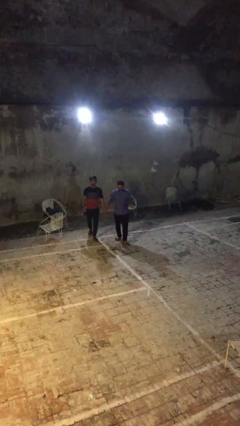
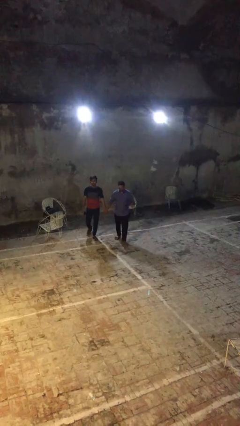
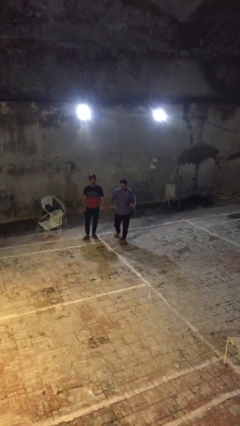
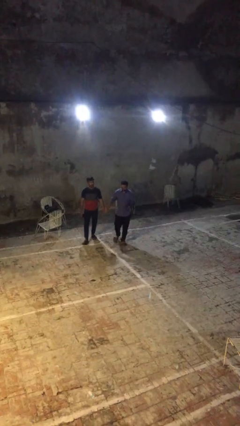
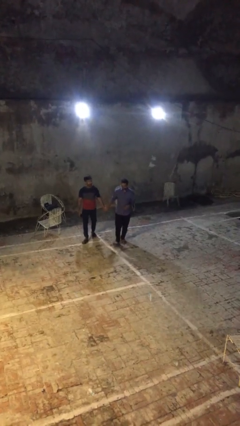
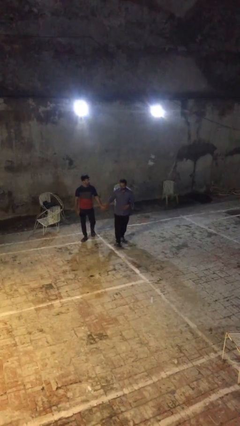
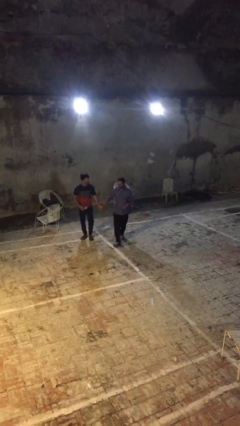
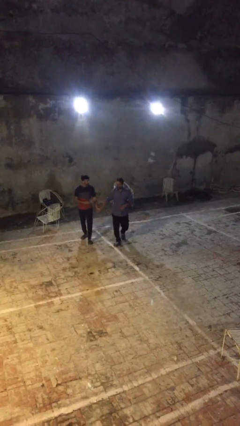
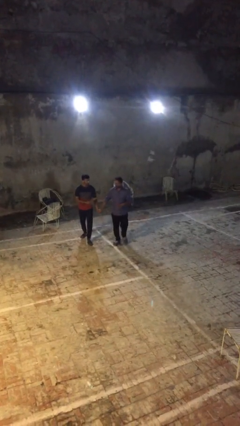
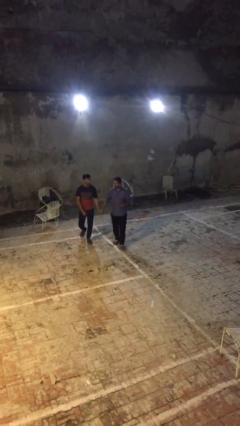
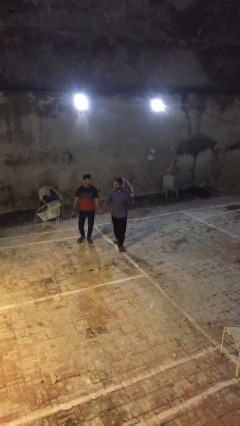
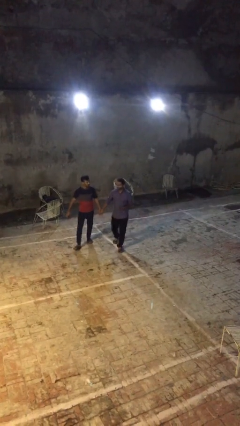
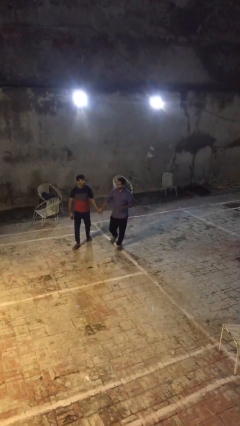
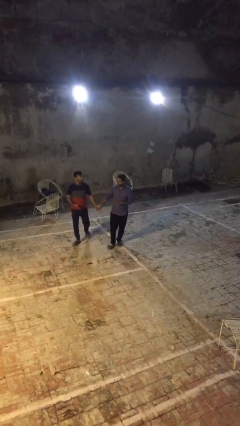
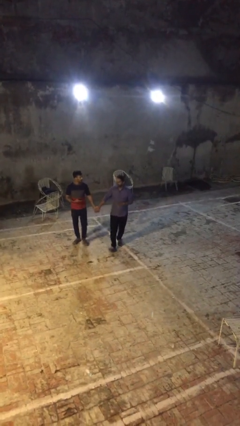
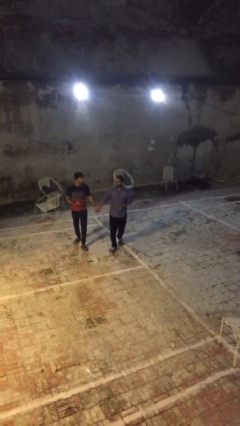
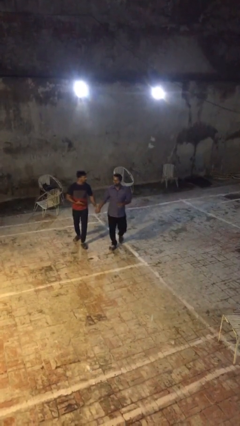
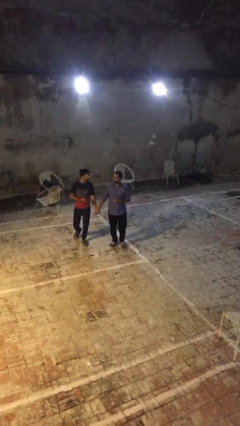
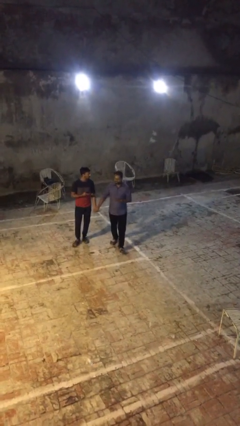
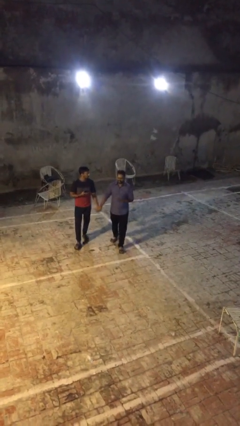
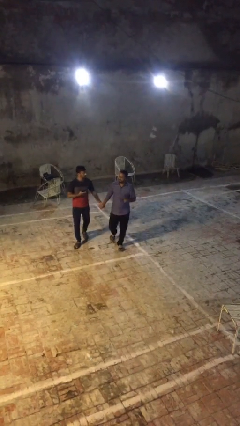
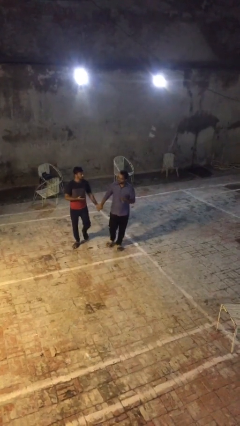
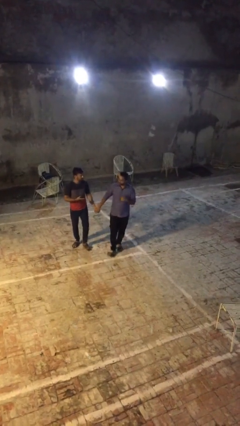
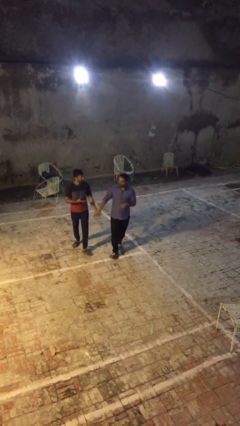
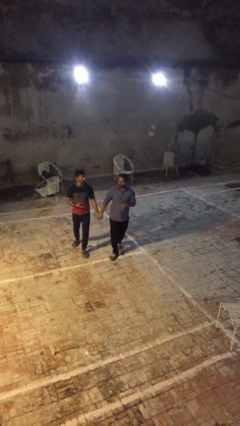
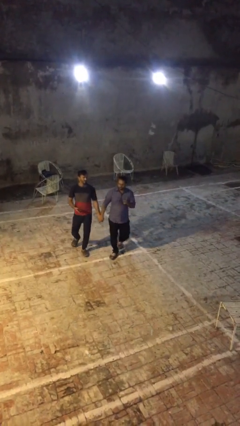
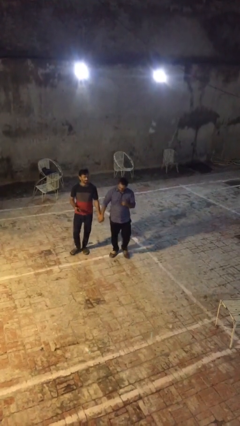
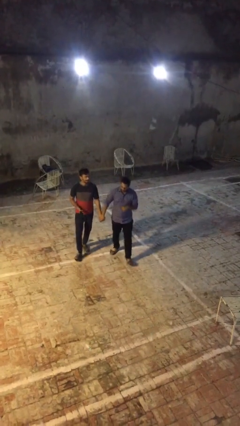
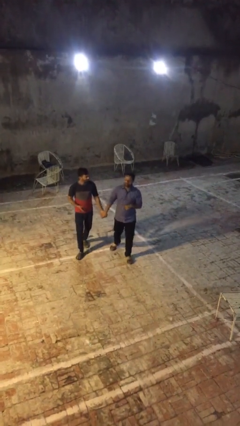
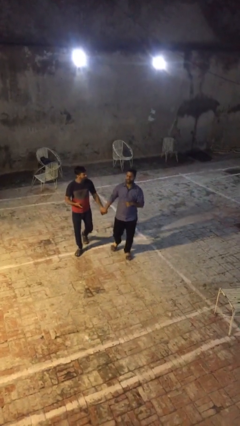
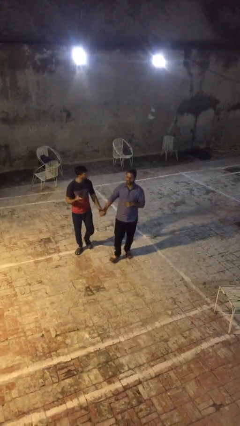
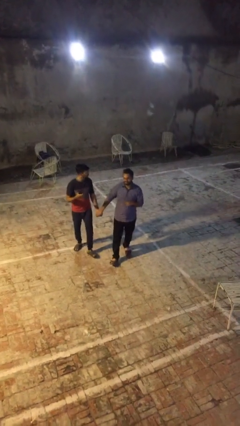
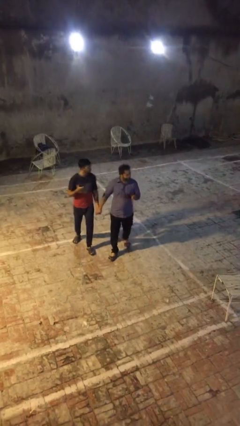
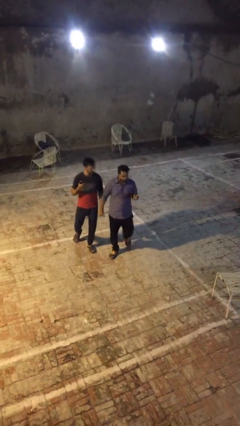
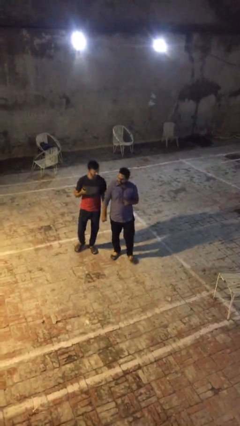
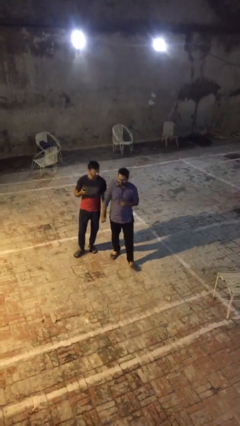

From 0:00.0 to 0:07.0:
person holds hand

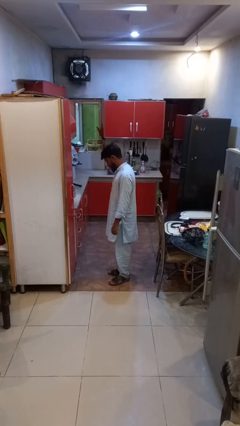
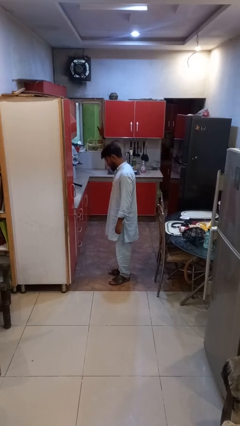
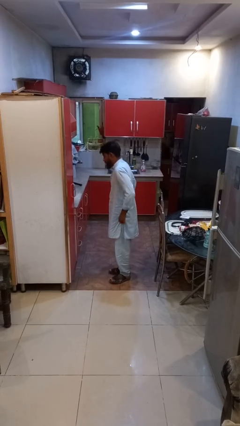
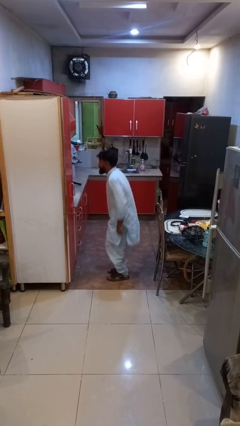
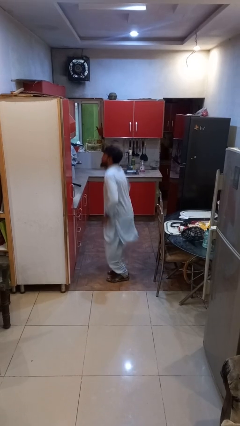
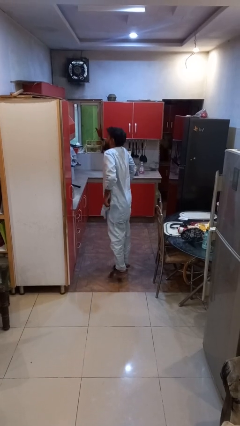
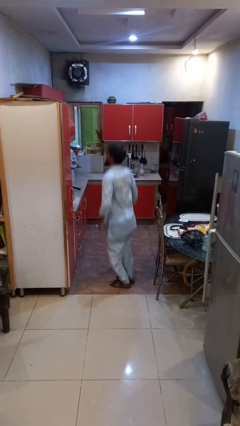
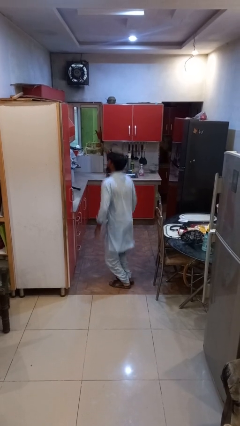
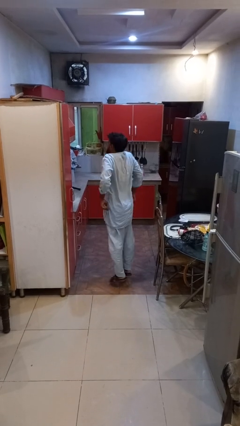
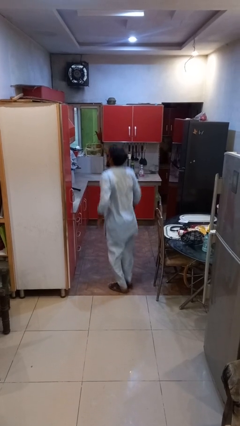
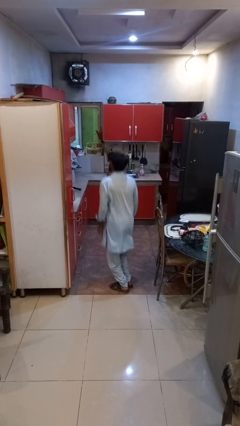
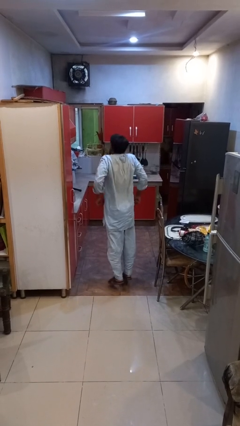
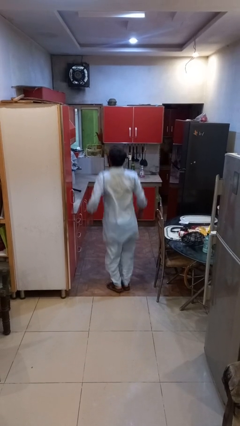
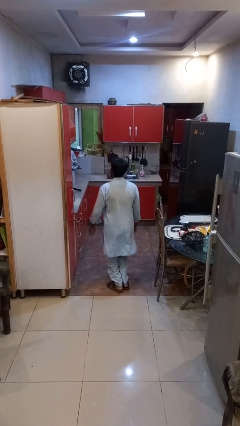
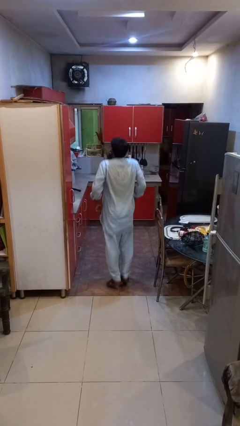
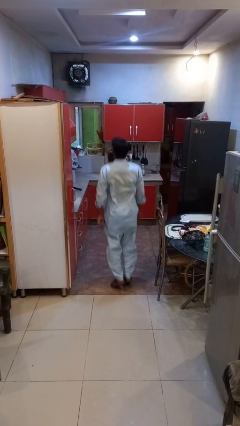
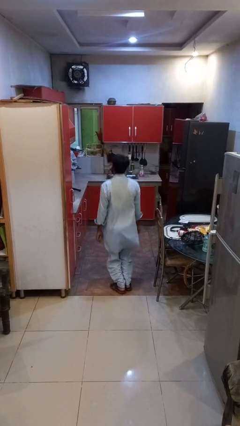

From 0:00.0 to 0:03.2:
person jumps

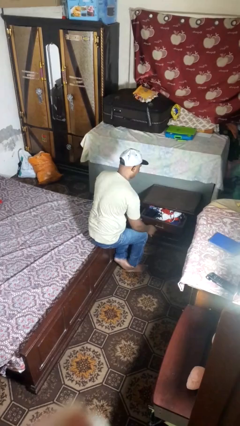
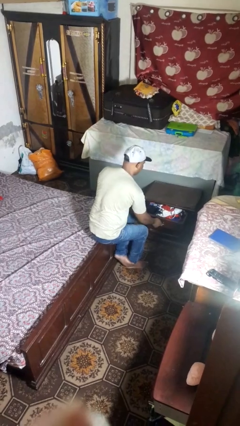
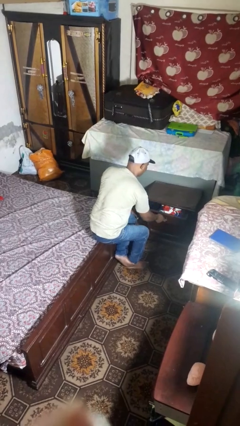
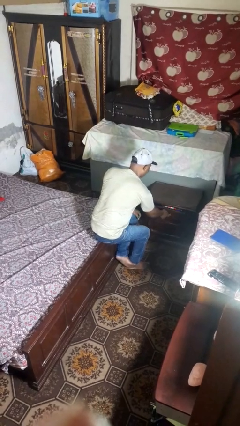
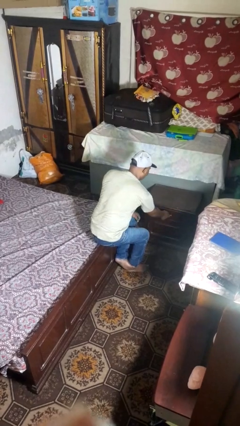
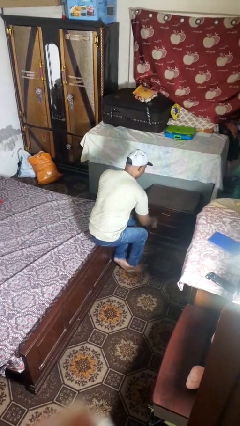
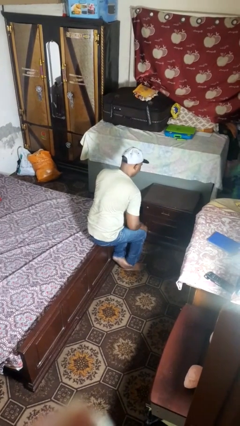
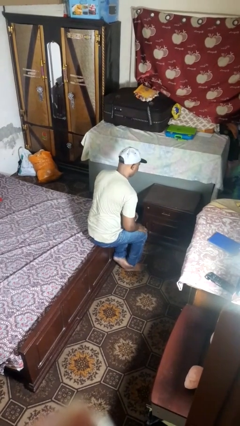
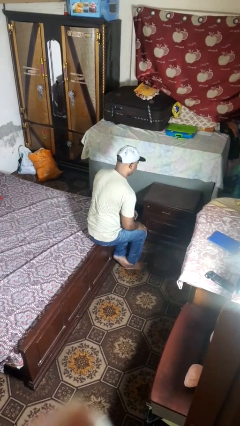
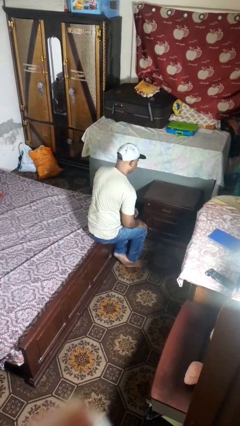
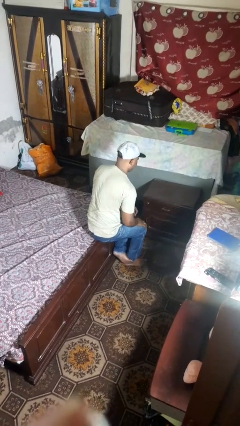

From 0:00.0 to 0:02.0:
person closes dresser drawer

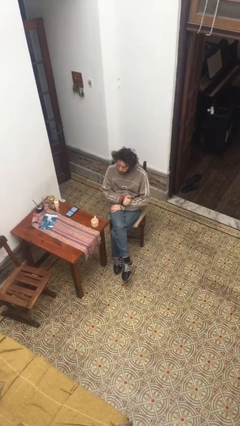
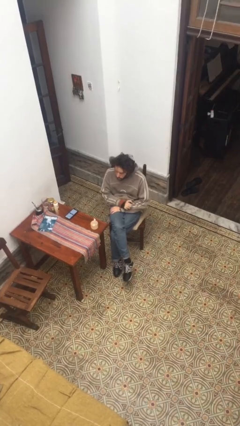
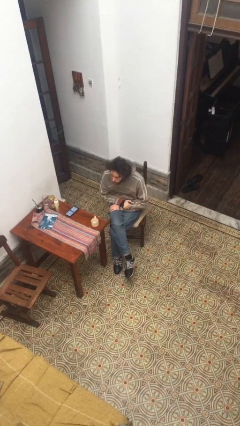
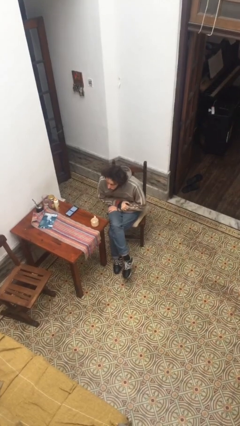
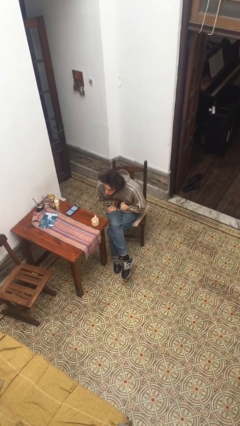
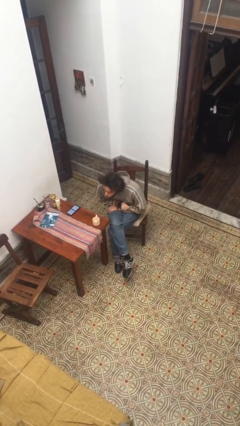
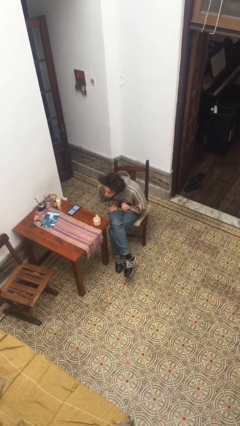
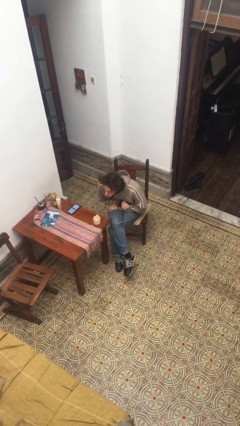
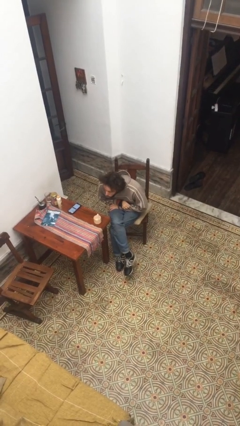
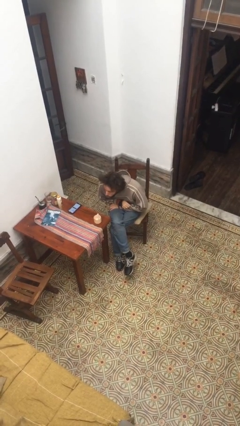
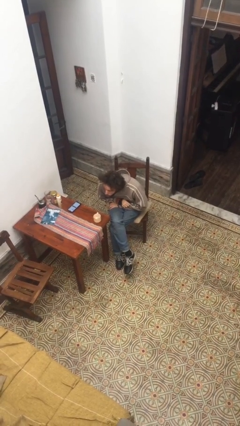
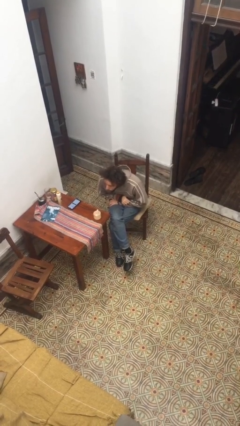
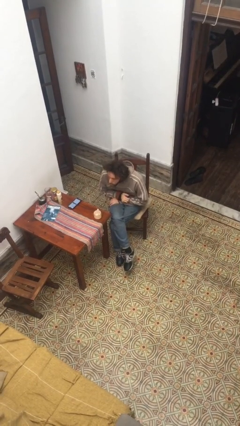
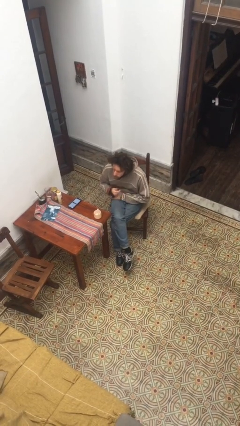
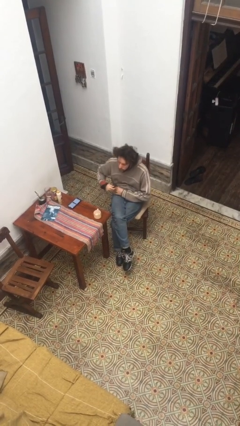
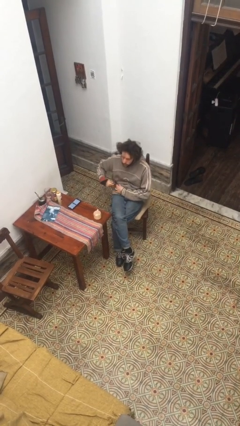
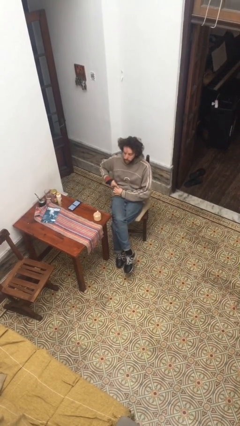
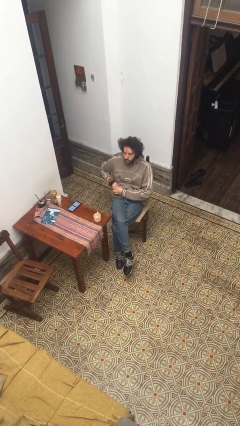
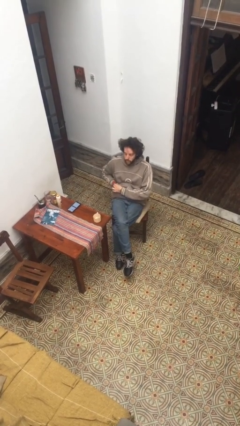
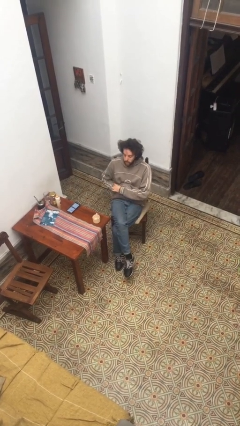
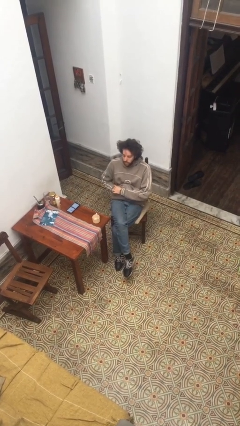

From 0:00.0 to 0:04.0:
person extinguishes candle

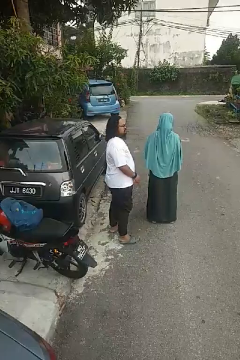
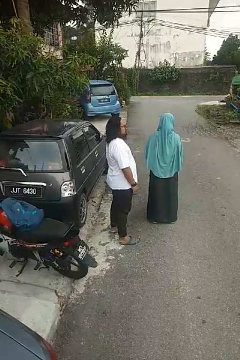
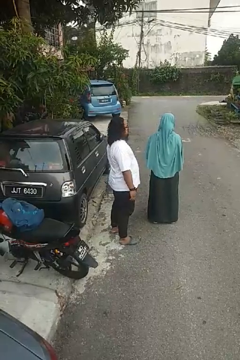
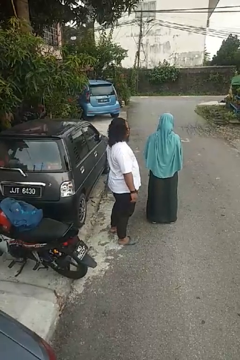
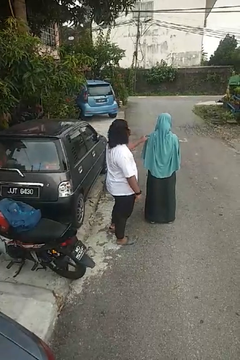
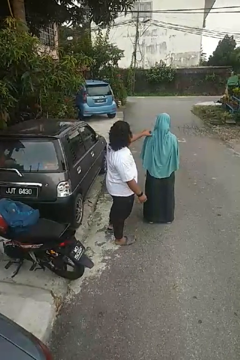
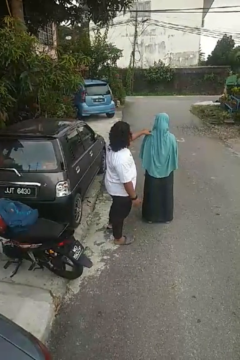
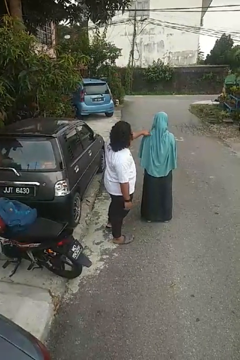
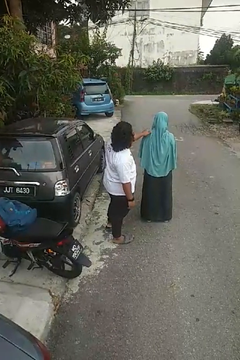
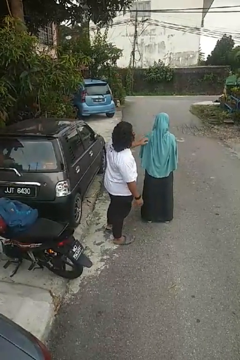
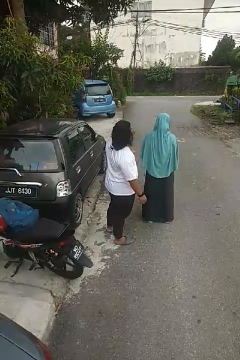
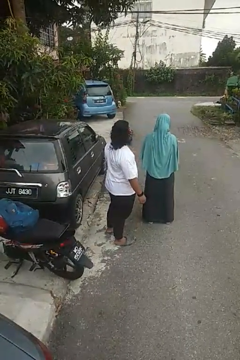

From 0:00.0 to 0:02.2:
person touches back of person
